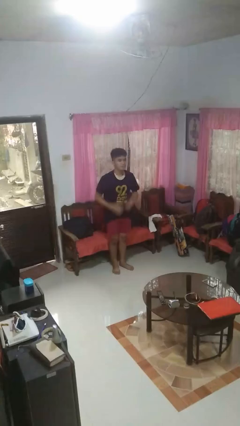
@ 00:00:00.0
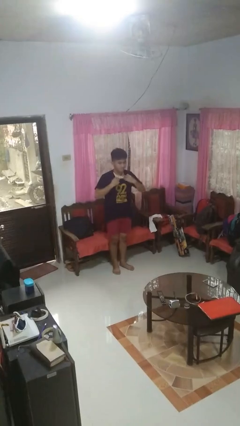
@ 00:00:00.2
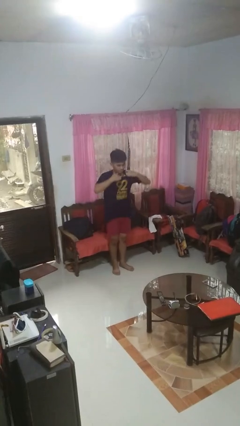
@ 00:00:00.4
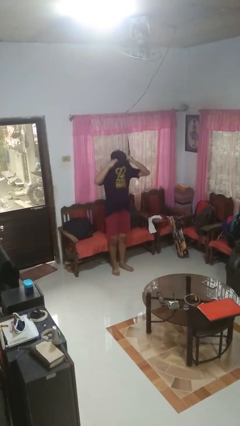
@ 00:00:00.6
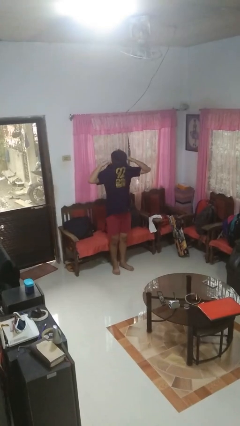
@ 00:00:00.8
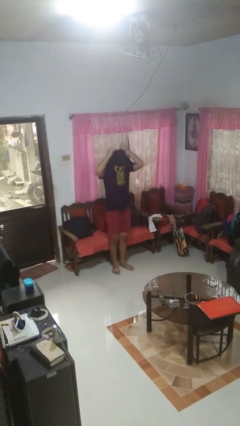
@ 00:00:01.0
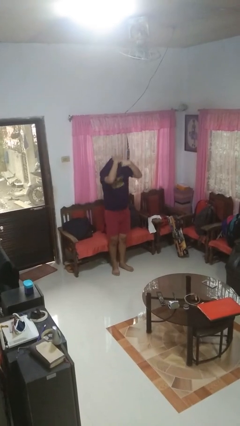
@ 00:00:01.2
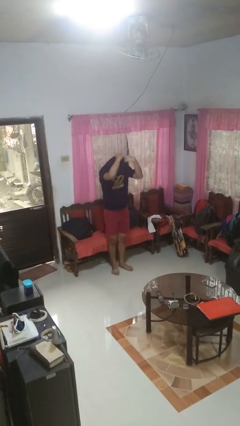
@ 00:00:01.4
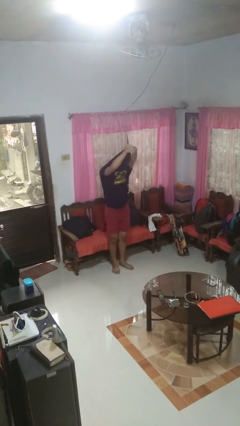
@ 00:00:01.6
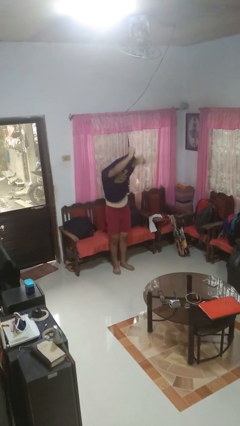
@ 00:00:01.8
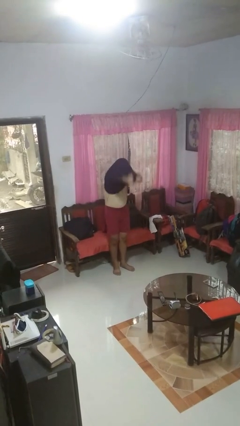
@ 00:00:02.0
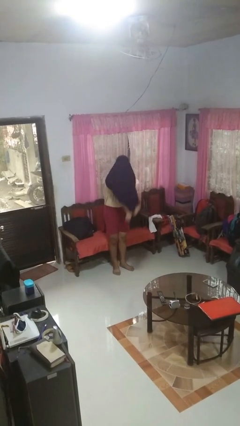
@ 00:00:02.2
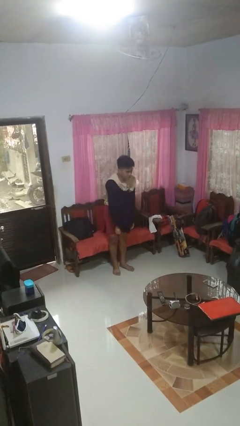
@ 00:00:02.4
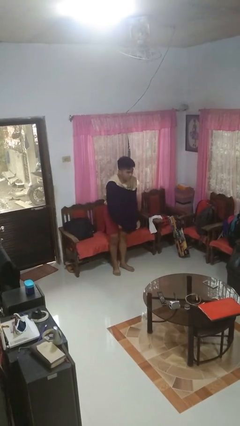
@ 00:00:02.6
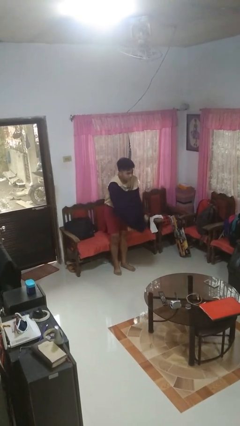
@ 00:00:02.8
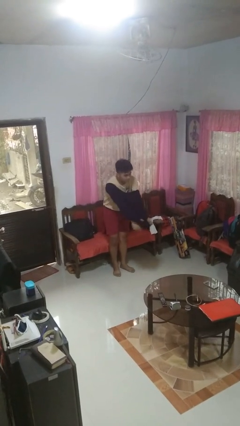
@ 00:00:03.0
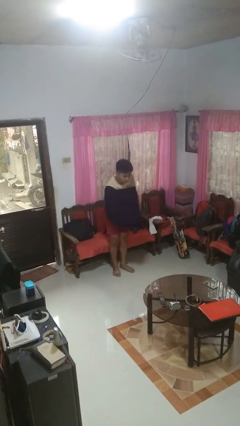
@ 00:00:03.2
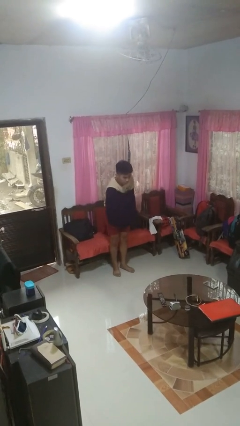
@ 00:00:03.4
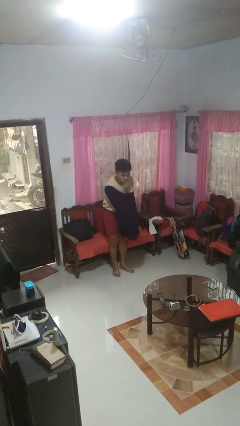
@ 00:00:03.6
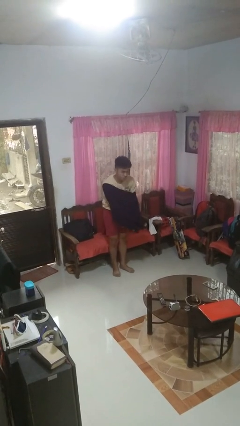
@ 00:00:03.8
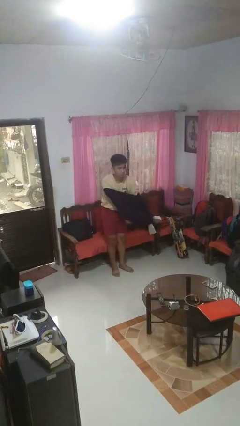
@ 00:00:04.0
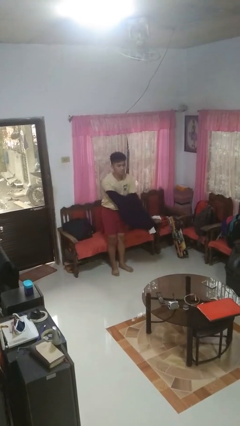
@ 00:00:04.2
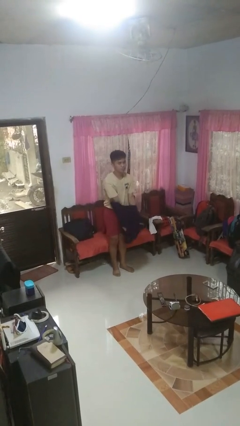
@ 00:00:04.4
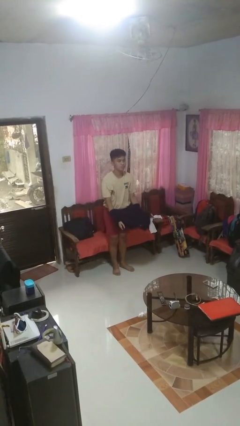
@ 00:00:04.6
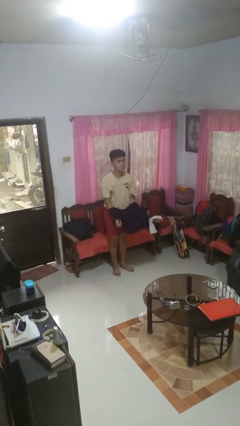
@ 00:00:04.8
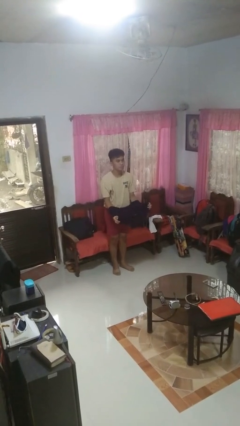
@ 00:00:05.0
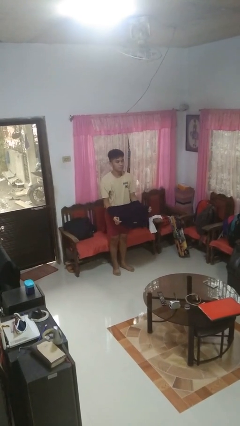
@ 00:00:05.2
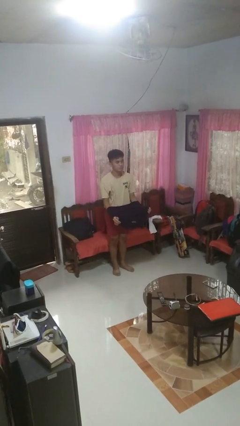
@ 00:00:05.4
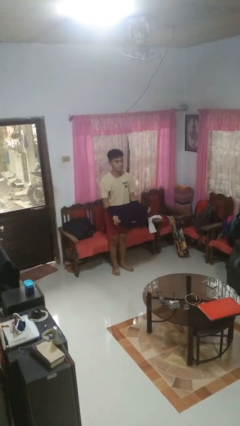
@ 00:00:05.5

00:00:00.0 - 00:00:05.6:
person takes off shirt

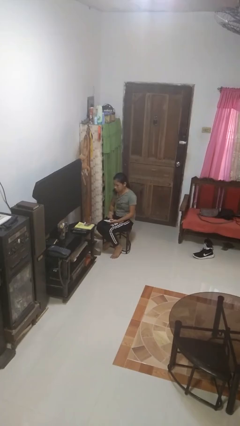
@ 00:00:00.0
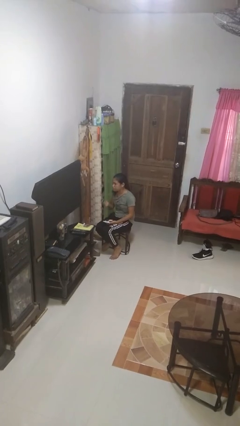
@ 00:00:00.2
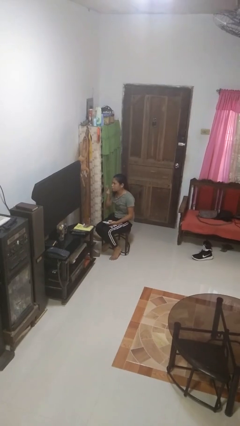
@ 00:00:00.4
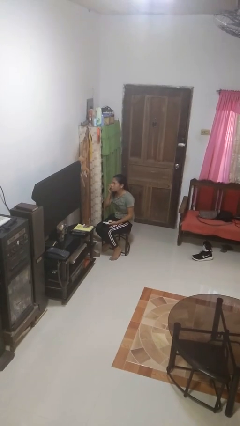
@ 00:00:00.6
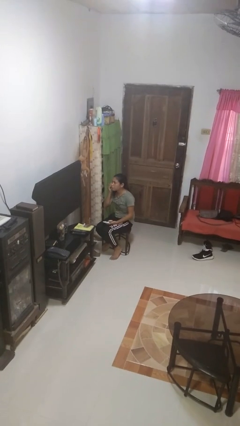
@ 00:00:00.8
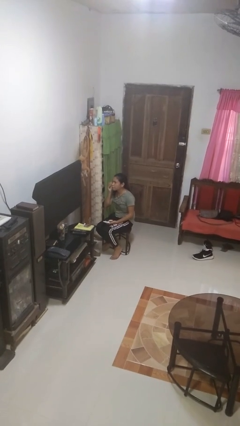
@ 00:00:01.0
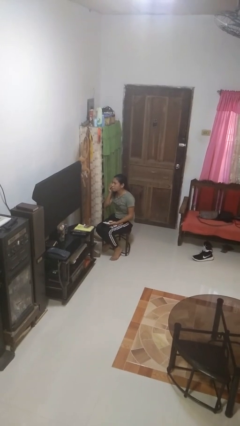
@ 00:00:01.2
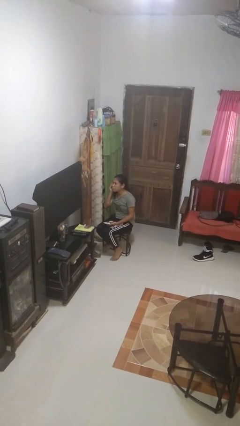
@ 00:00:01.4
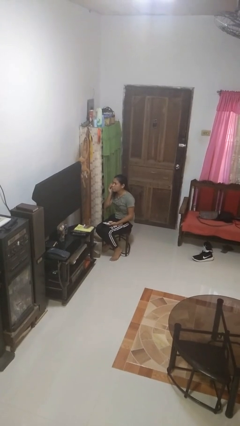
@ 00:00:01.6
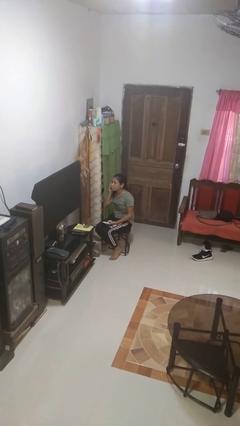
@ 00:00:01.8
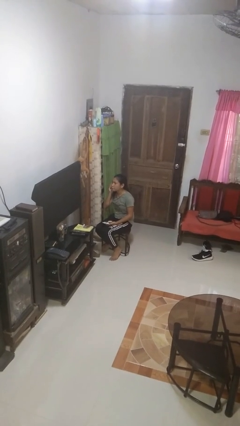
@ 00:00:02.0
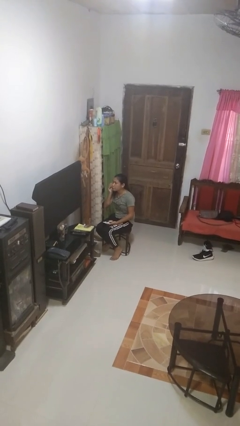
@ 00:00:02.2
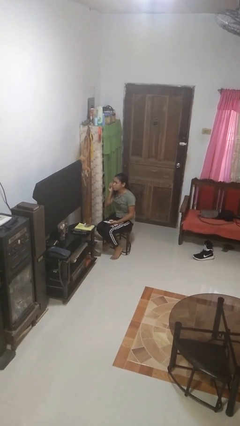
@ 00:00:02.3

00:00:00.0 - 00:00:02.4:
person applies foundation makeup

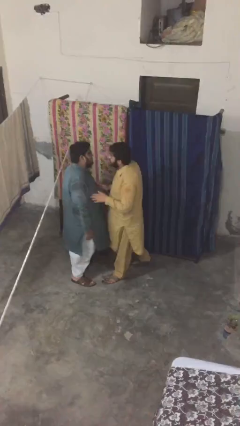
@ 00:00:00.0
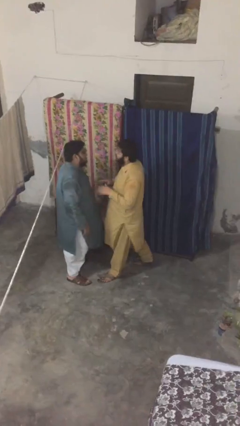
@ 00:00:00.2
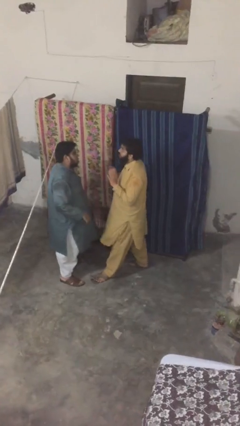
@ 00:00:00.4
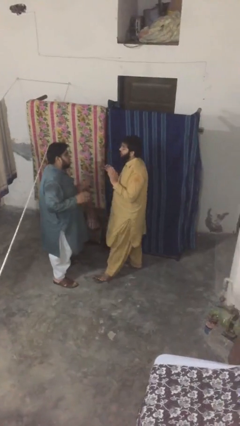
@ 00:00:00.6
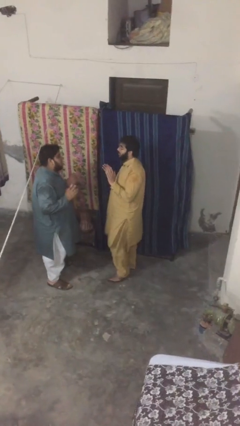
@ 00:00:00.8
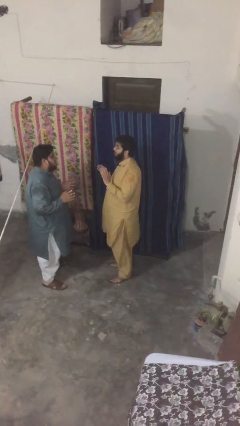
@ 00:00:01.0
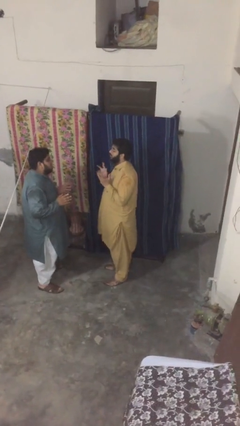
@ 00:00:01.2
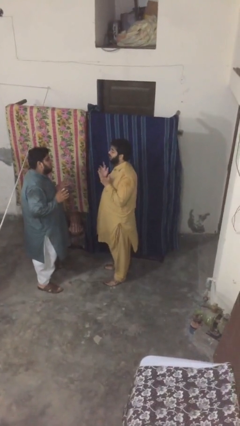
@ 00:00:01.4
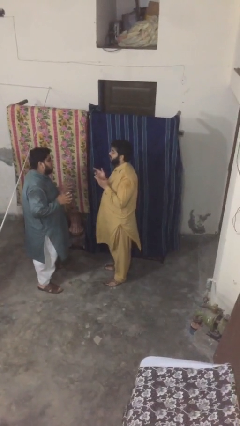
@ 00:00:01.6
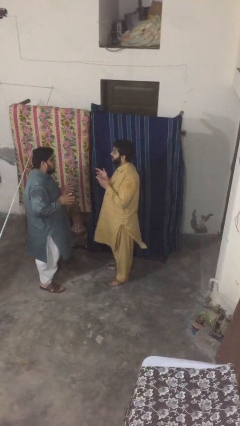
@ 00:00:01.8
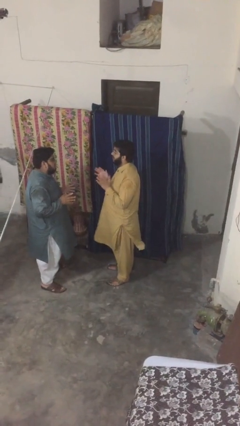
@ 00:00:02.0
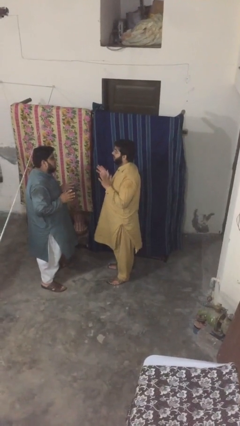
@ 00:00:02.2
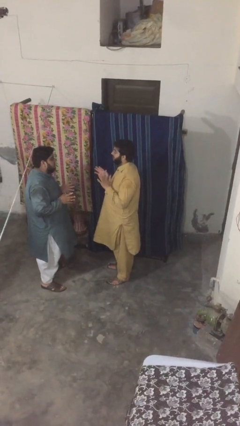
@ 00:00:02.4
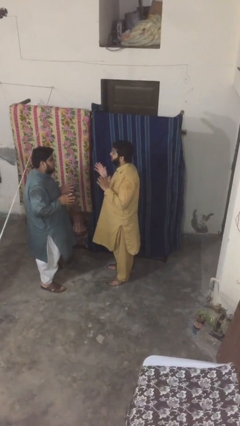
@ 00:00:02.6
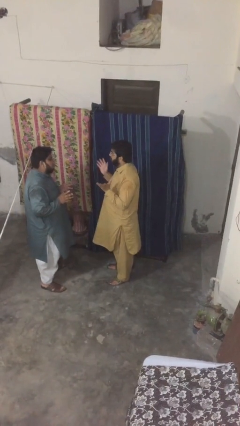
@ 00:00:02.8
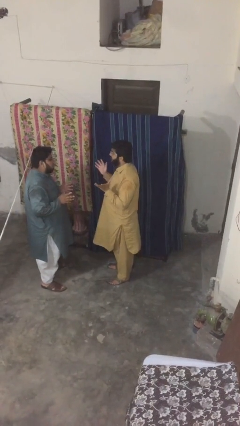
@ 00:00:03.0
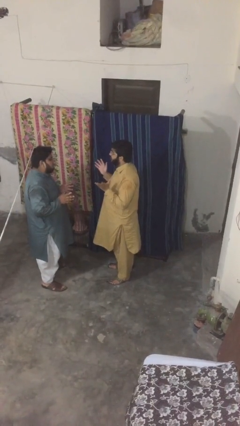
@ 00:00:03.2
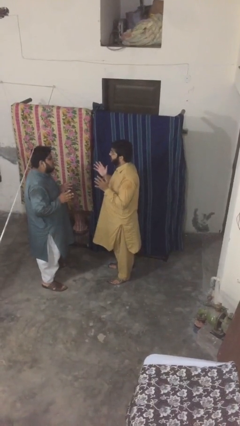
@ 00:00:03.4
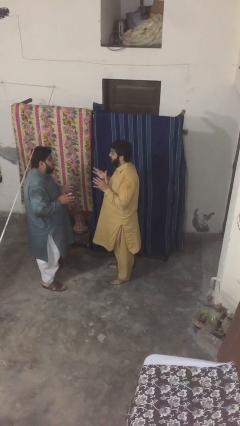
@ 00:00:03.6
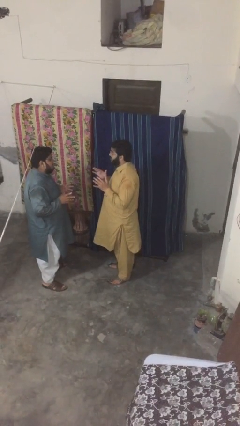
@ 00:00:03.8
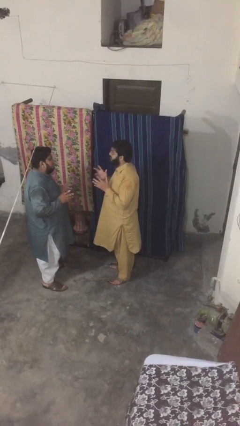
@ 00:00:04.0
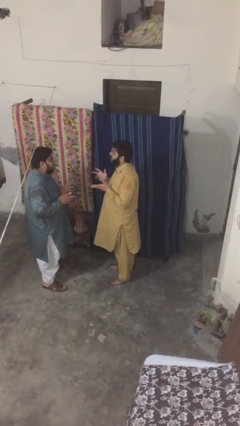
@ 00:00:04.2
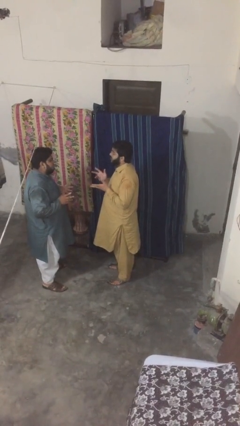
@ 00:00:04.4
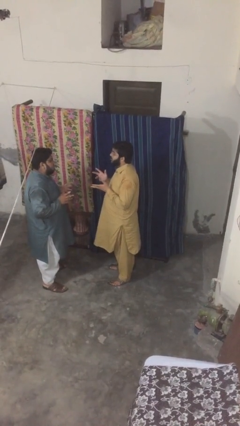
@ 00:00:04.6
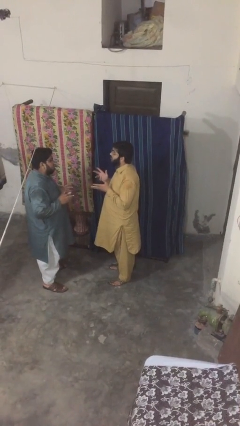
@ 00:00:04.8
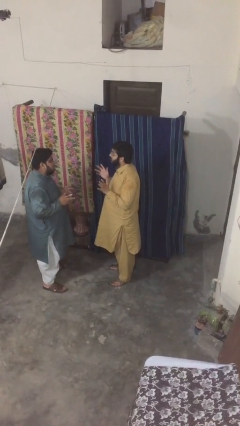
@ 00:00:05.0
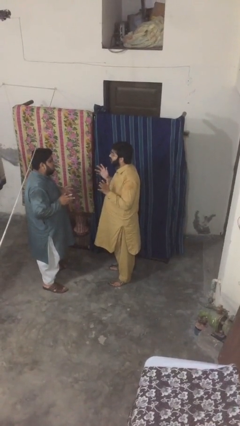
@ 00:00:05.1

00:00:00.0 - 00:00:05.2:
person talks to person

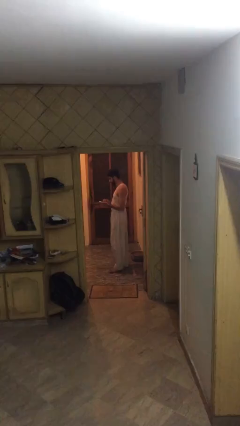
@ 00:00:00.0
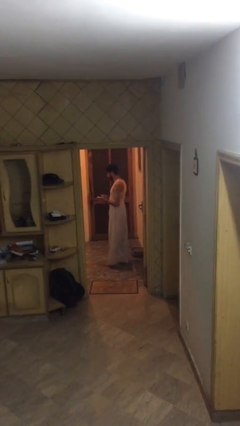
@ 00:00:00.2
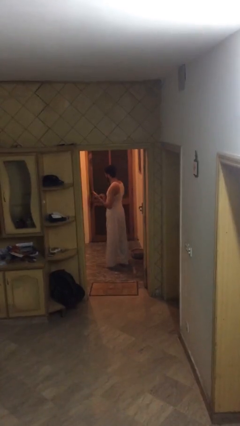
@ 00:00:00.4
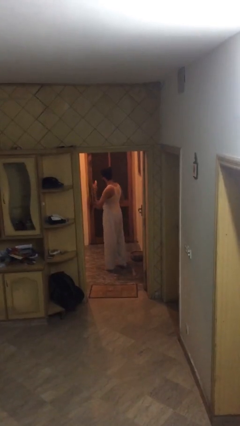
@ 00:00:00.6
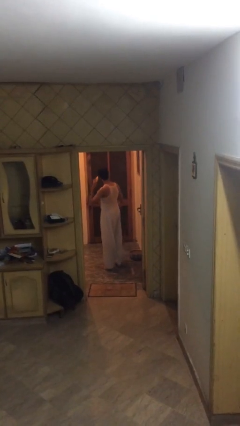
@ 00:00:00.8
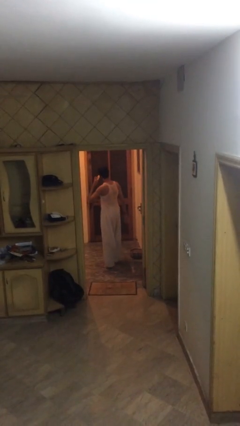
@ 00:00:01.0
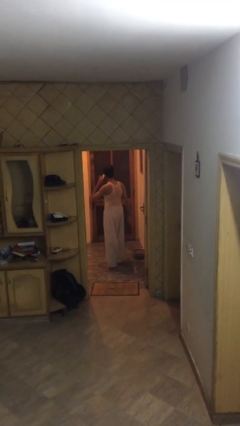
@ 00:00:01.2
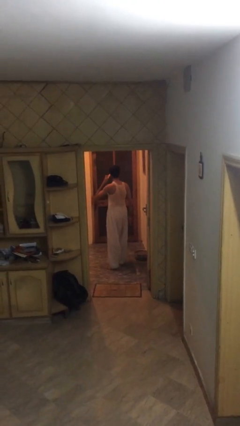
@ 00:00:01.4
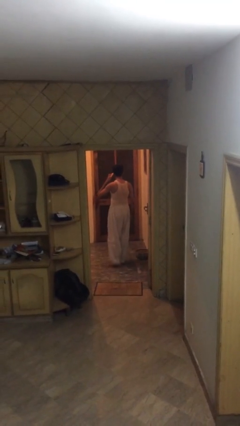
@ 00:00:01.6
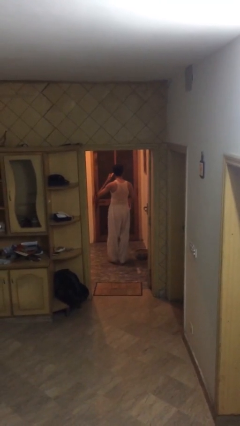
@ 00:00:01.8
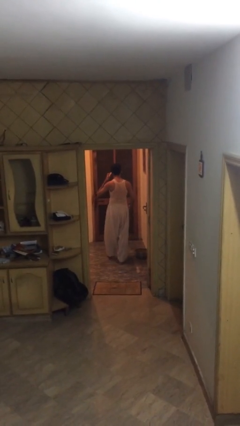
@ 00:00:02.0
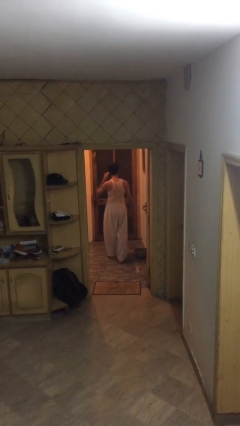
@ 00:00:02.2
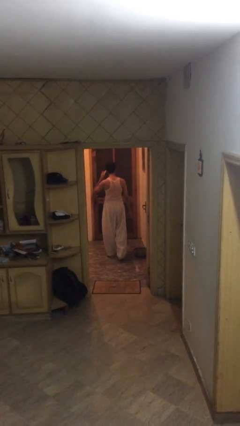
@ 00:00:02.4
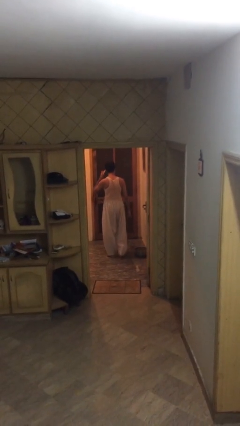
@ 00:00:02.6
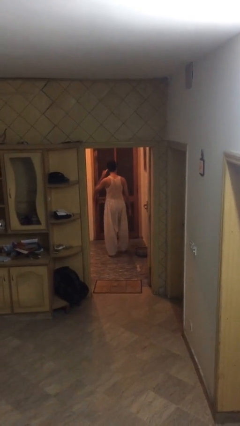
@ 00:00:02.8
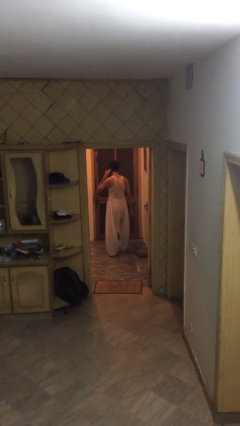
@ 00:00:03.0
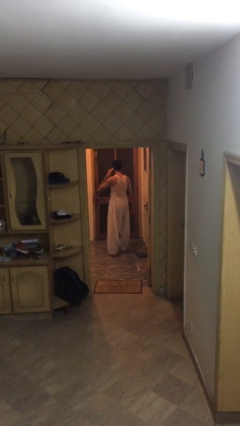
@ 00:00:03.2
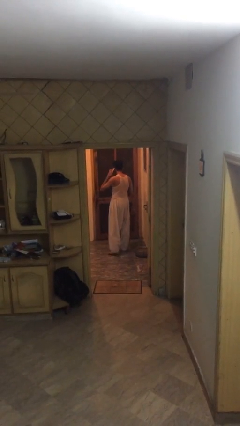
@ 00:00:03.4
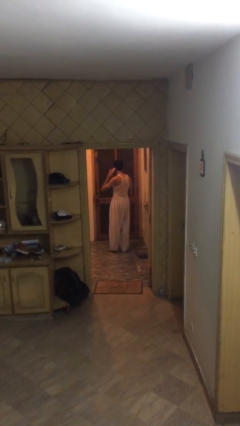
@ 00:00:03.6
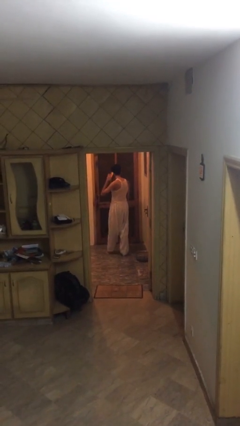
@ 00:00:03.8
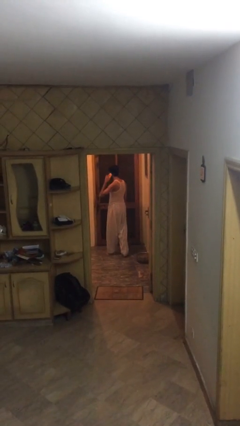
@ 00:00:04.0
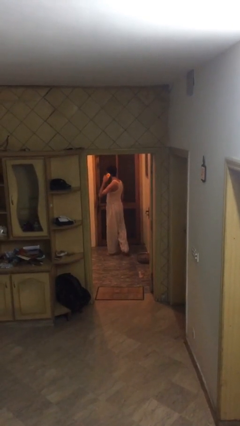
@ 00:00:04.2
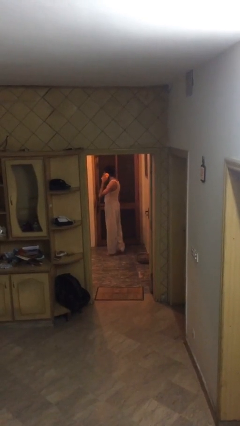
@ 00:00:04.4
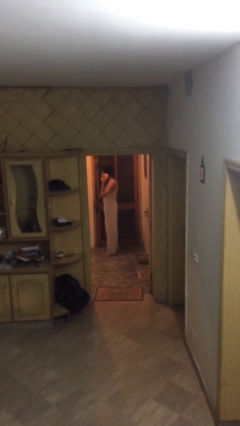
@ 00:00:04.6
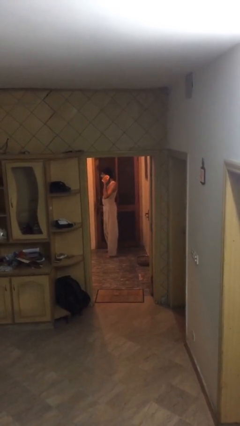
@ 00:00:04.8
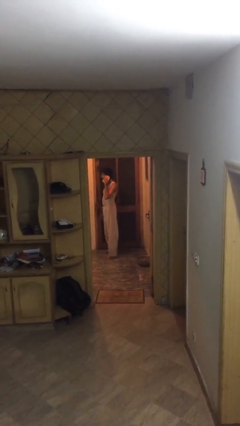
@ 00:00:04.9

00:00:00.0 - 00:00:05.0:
person talks on phone
